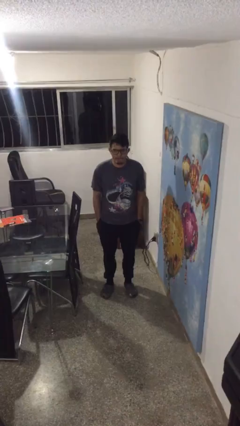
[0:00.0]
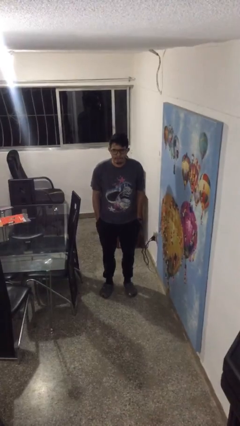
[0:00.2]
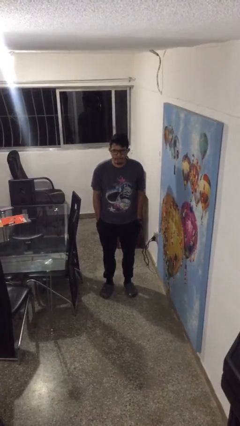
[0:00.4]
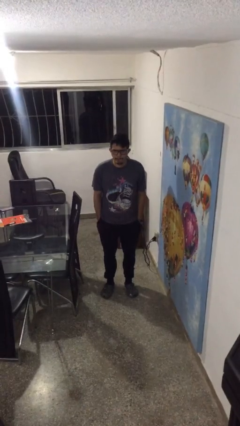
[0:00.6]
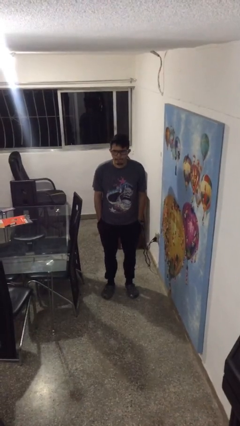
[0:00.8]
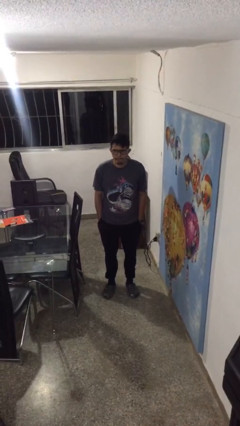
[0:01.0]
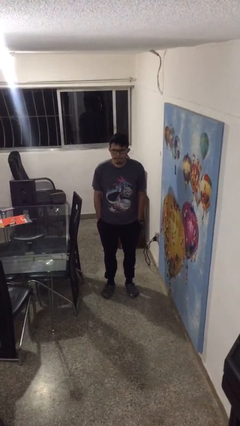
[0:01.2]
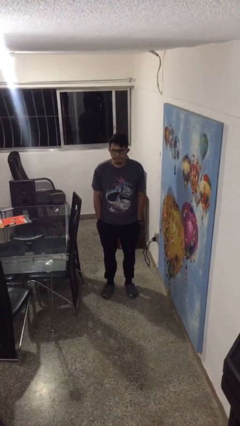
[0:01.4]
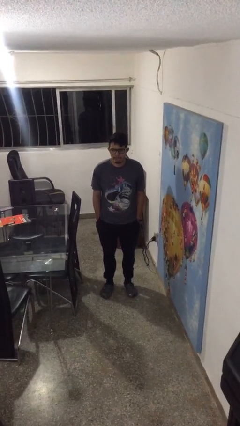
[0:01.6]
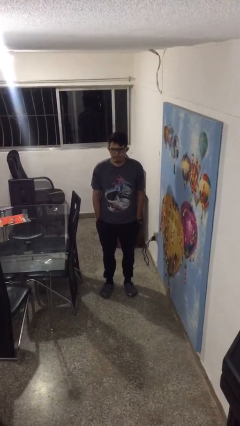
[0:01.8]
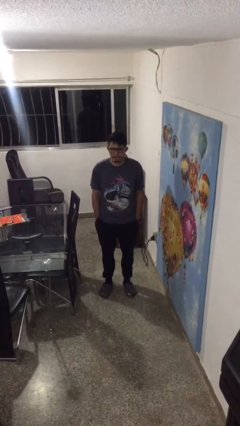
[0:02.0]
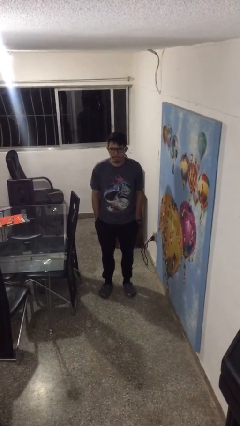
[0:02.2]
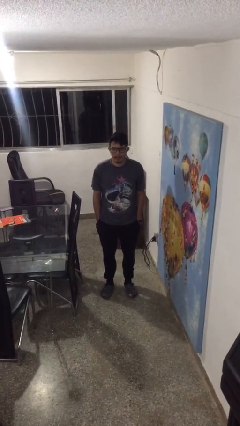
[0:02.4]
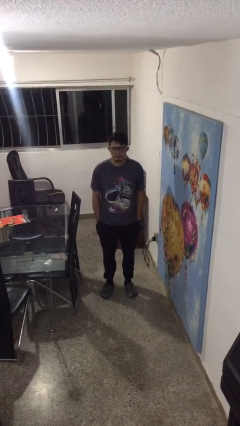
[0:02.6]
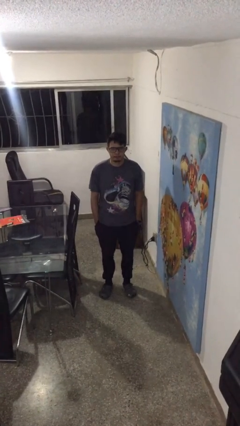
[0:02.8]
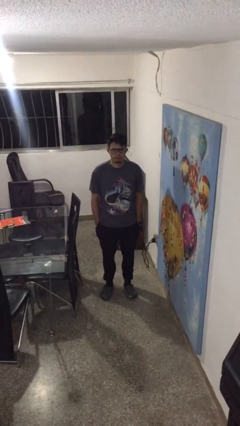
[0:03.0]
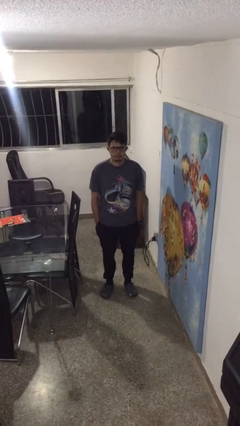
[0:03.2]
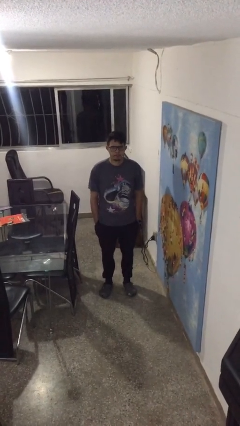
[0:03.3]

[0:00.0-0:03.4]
person sticks out tongue

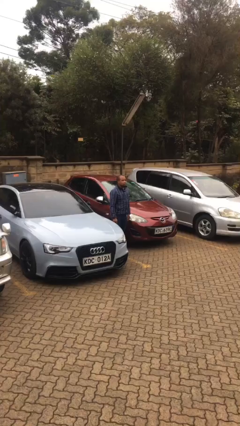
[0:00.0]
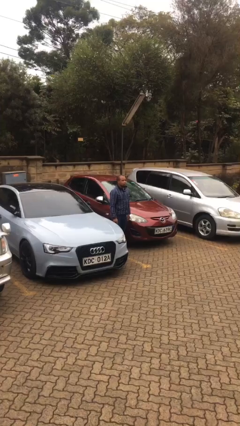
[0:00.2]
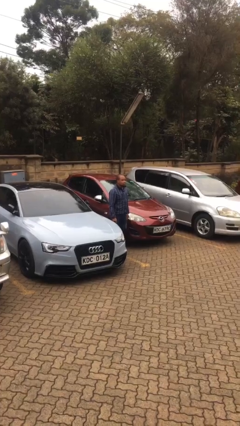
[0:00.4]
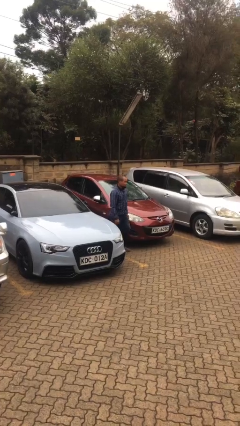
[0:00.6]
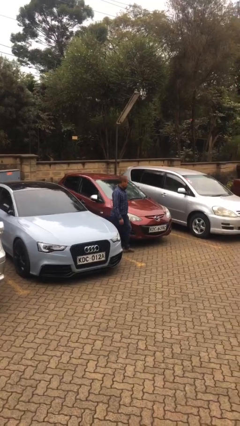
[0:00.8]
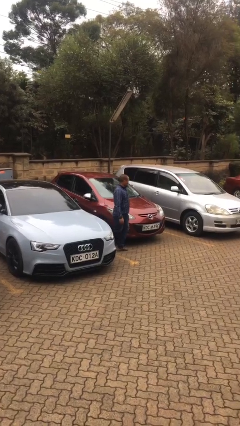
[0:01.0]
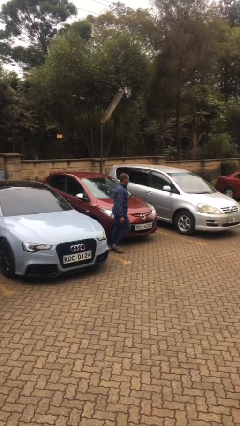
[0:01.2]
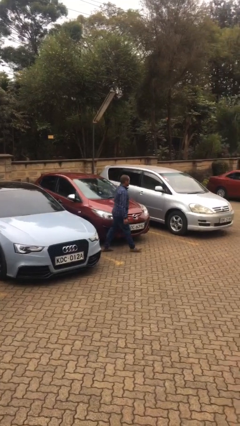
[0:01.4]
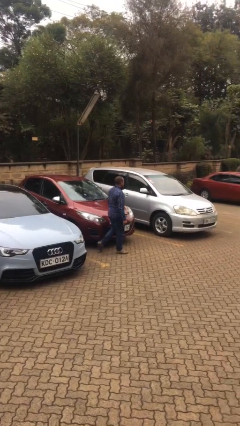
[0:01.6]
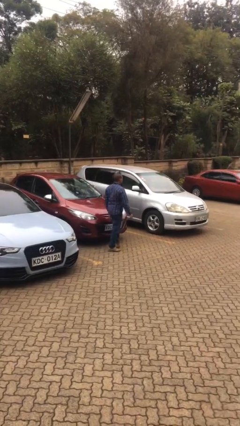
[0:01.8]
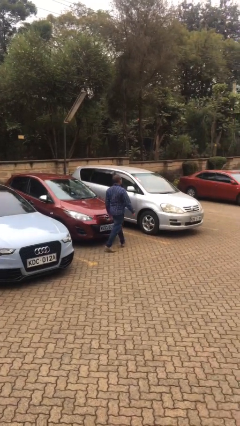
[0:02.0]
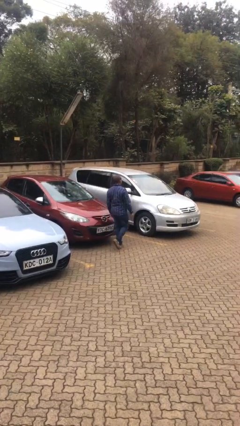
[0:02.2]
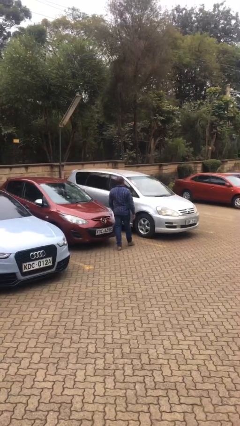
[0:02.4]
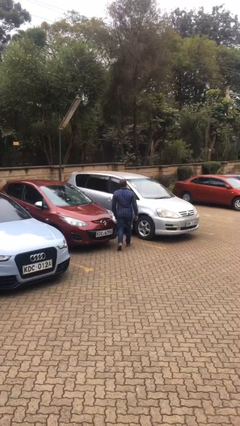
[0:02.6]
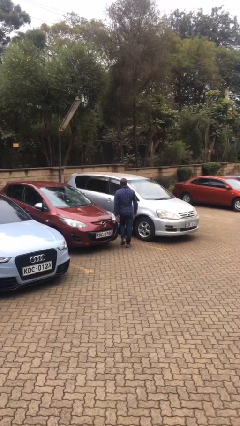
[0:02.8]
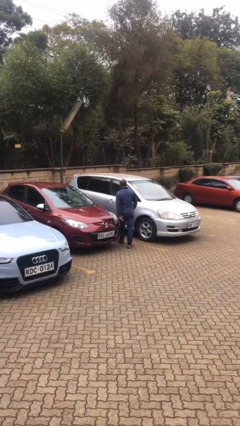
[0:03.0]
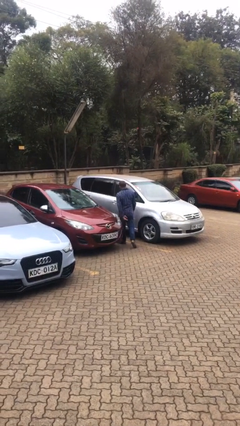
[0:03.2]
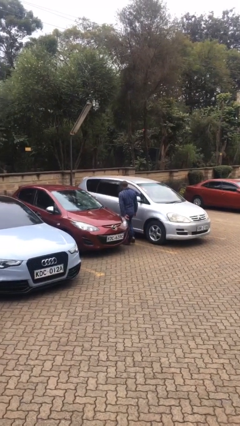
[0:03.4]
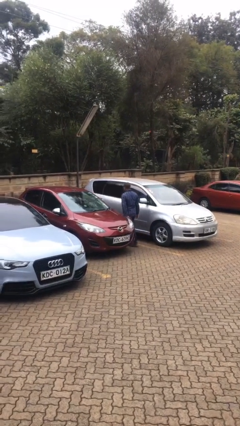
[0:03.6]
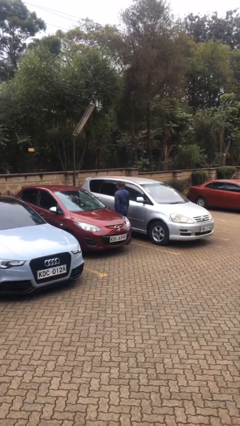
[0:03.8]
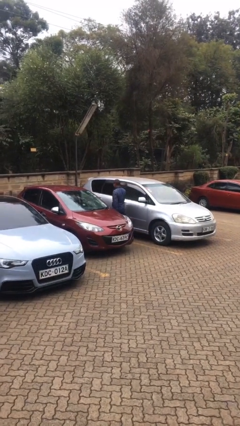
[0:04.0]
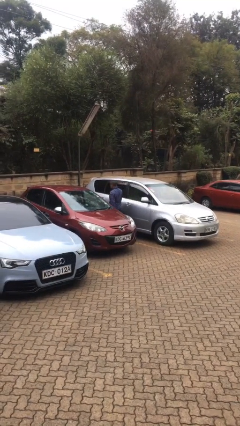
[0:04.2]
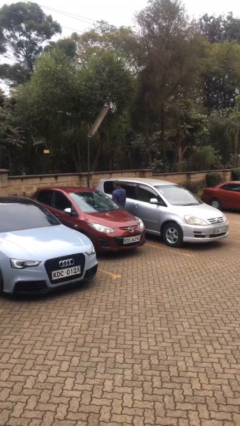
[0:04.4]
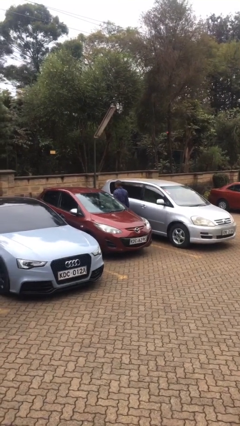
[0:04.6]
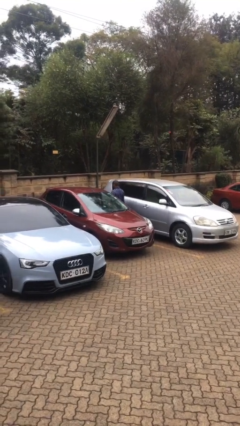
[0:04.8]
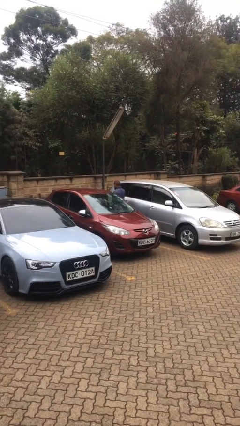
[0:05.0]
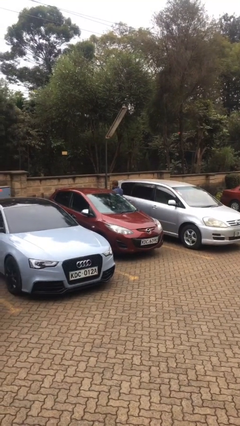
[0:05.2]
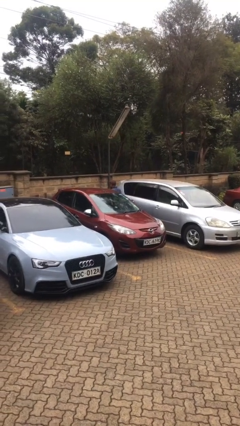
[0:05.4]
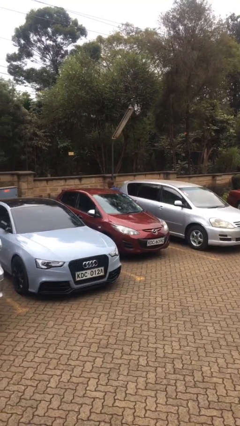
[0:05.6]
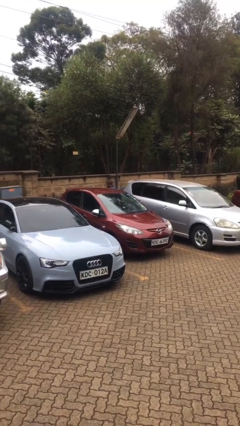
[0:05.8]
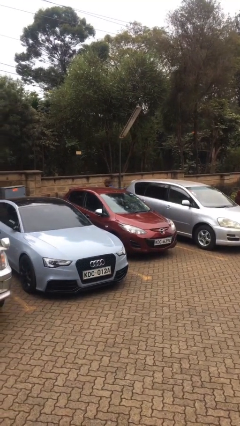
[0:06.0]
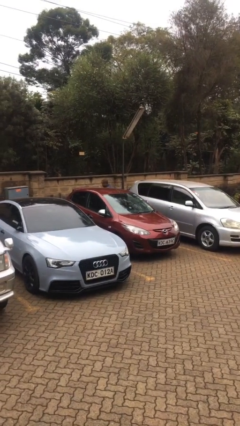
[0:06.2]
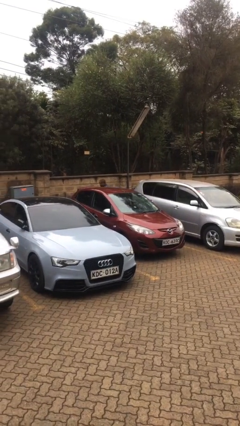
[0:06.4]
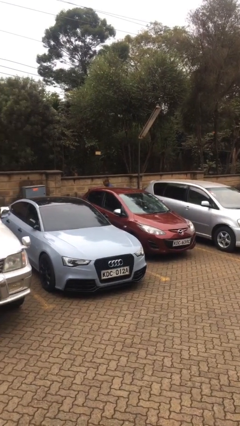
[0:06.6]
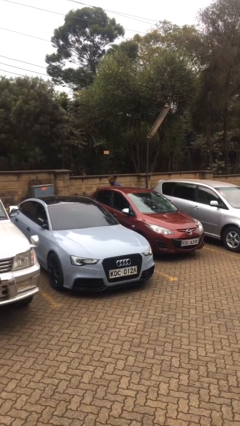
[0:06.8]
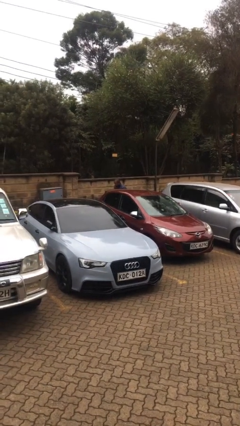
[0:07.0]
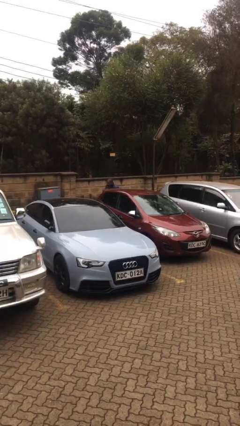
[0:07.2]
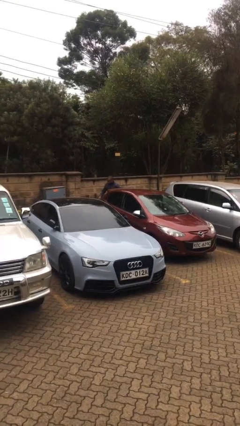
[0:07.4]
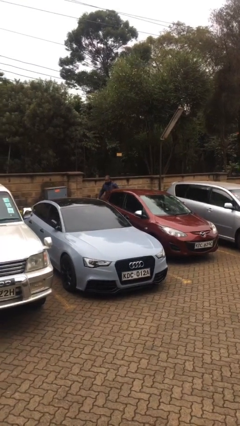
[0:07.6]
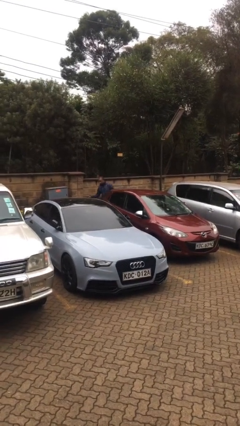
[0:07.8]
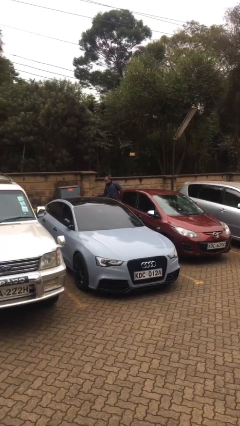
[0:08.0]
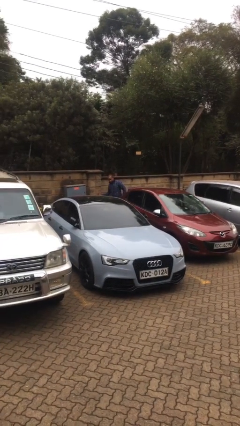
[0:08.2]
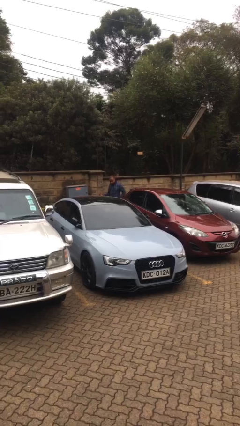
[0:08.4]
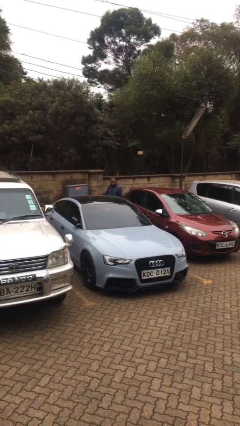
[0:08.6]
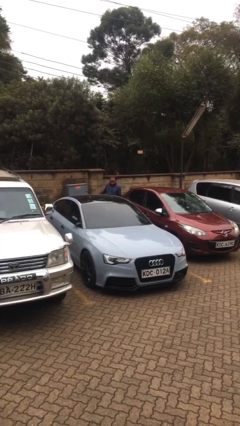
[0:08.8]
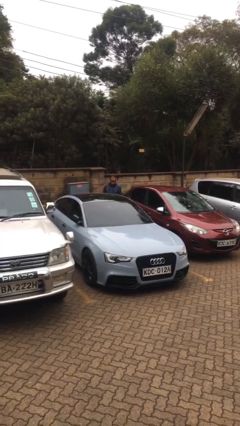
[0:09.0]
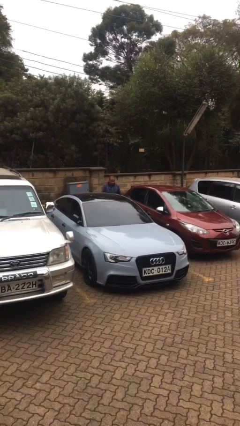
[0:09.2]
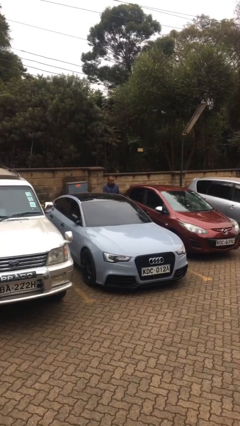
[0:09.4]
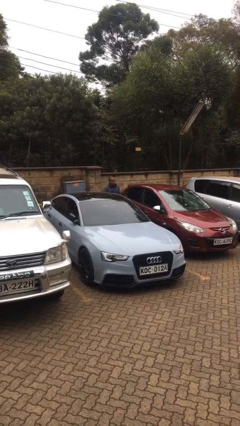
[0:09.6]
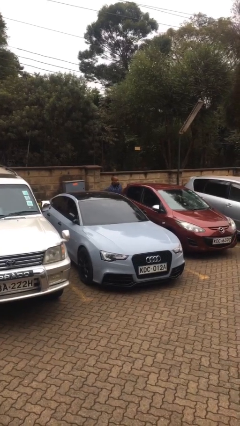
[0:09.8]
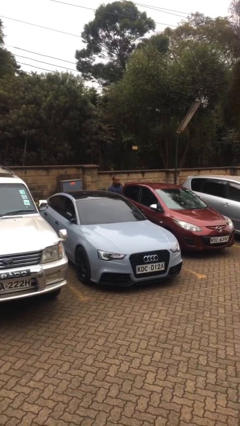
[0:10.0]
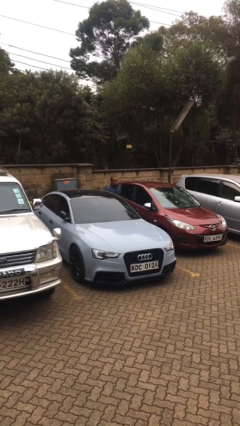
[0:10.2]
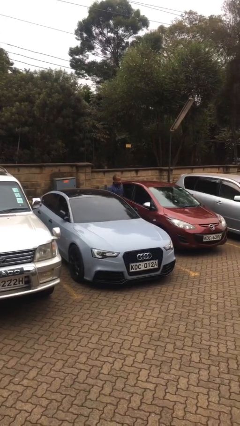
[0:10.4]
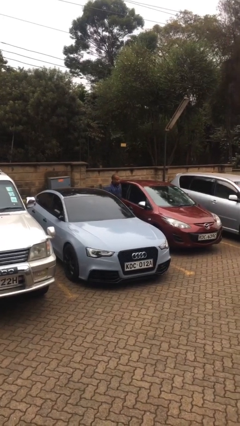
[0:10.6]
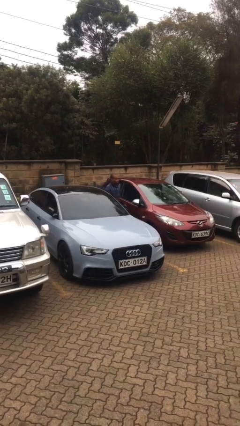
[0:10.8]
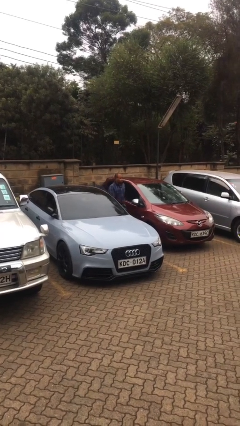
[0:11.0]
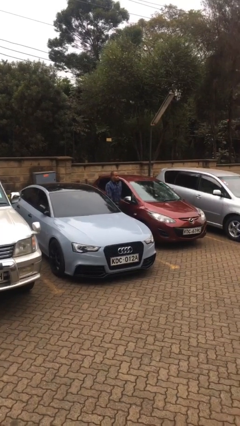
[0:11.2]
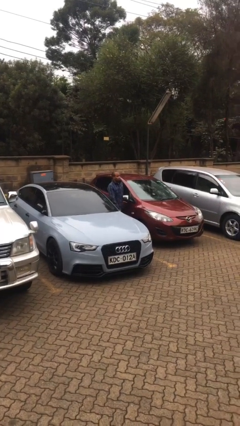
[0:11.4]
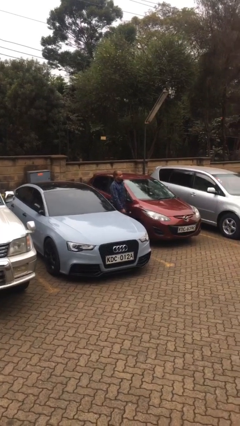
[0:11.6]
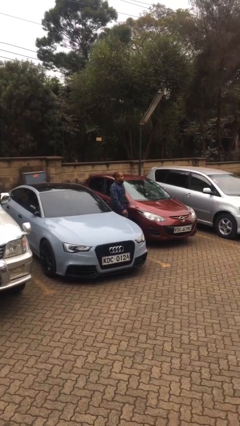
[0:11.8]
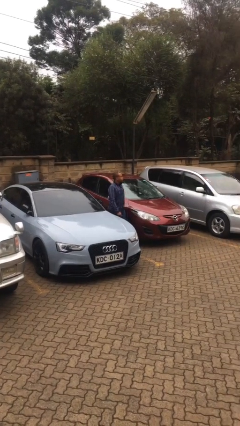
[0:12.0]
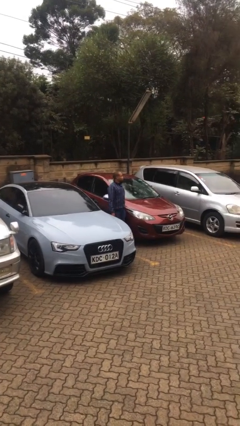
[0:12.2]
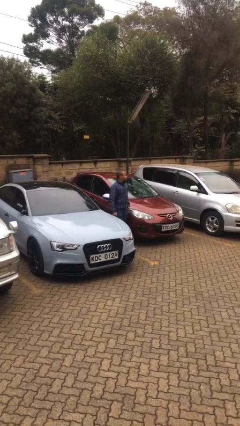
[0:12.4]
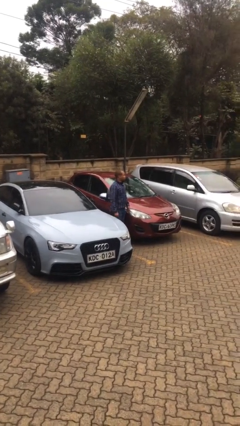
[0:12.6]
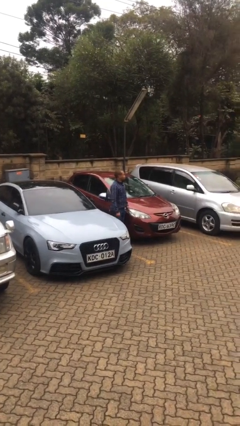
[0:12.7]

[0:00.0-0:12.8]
person walks around car

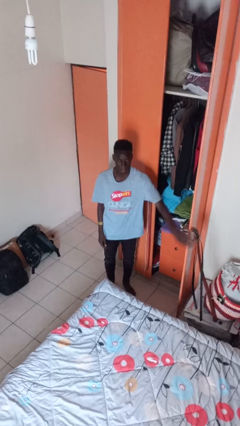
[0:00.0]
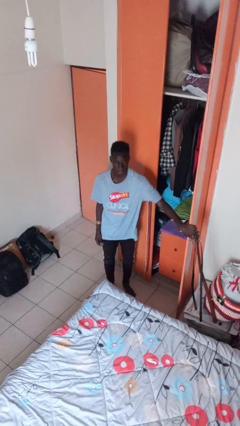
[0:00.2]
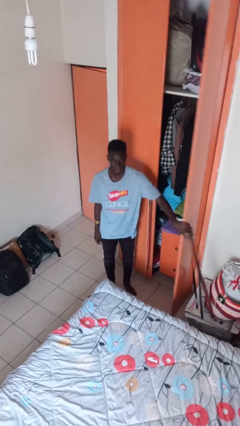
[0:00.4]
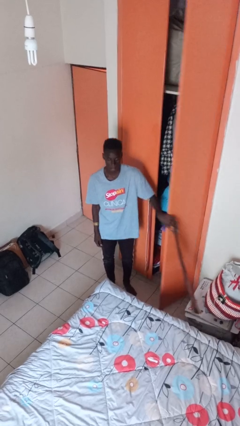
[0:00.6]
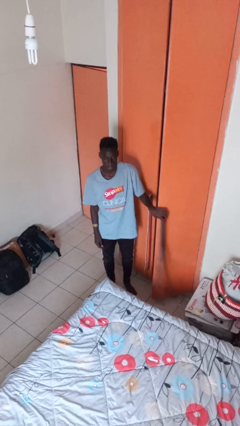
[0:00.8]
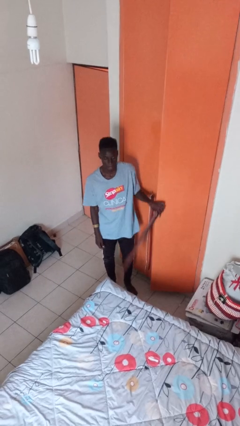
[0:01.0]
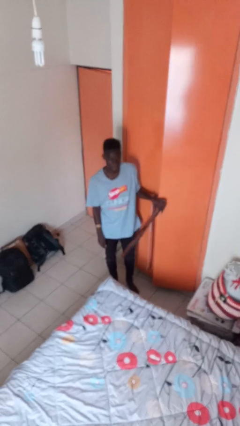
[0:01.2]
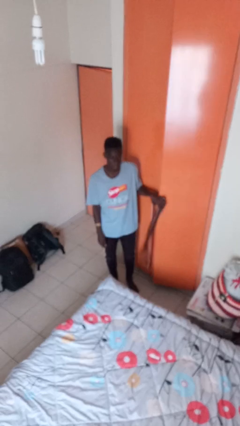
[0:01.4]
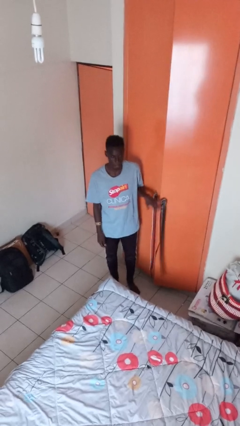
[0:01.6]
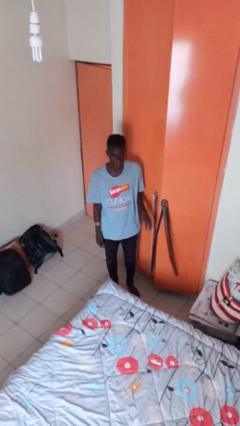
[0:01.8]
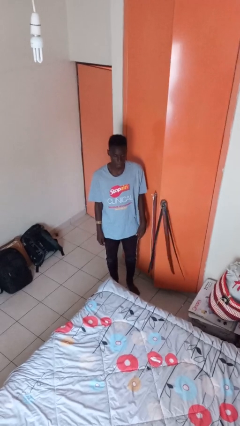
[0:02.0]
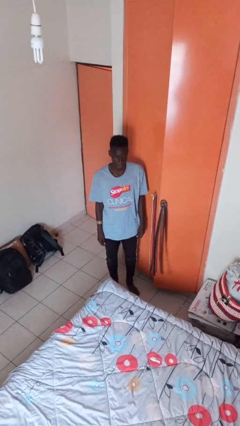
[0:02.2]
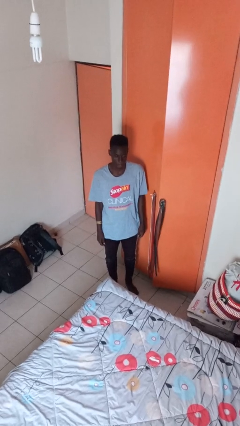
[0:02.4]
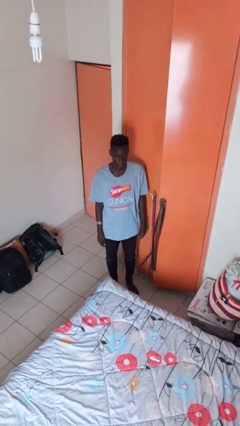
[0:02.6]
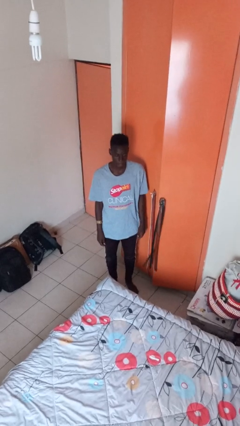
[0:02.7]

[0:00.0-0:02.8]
person closes closet door
